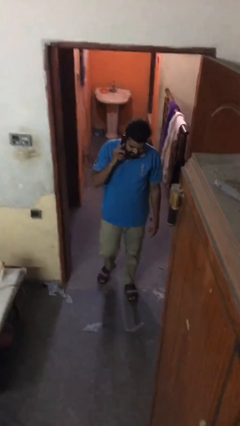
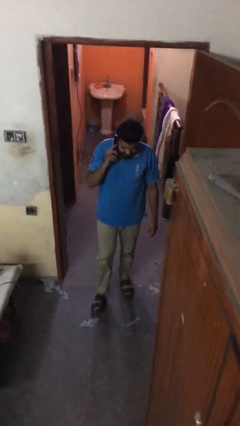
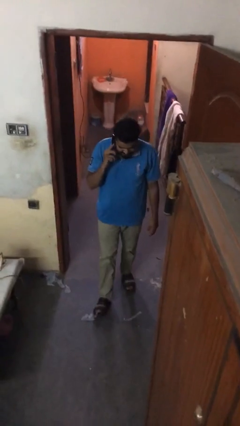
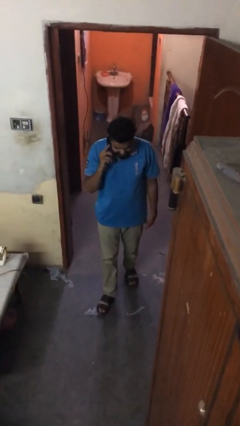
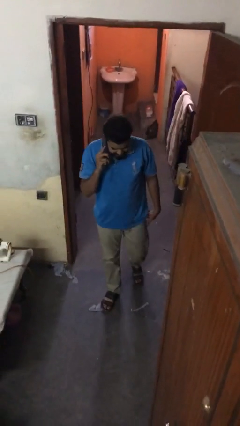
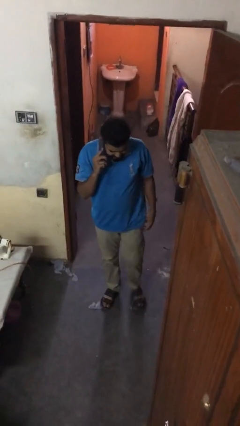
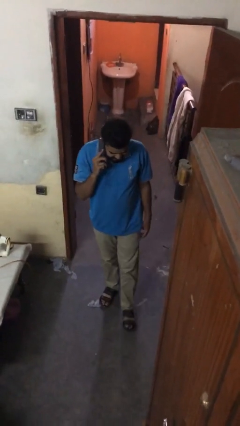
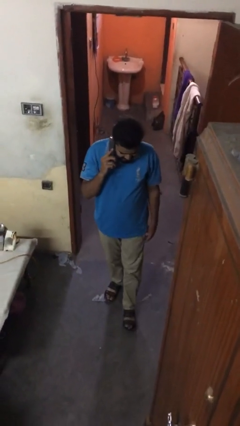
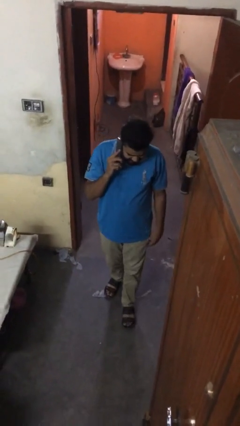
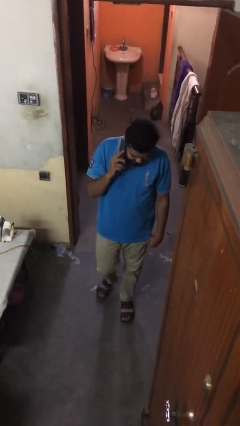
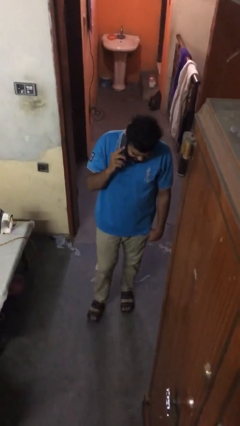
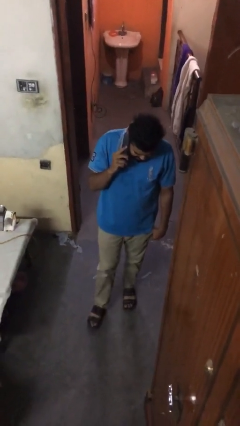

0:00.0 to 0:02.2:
person enters scene through structure

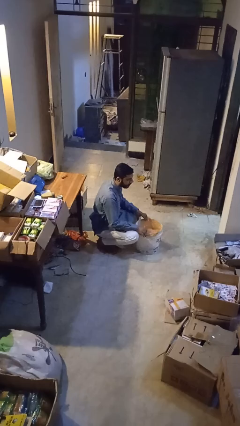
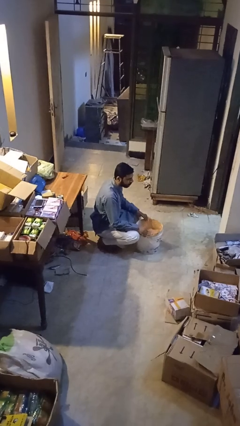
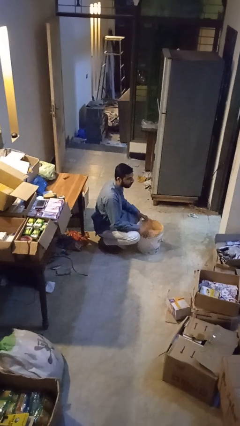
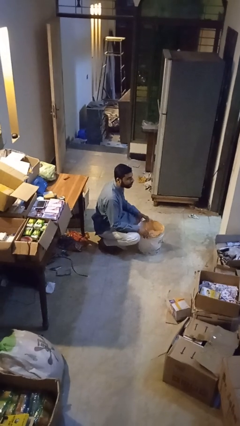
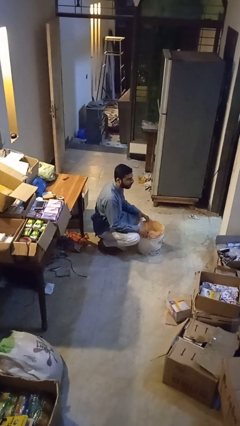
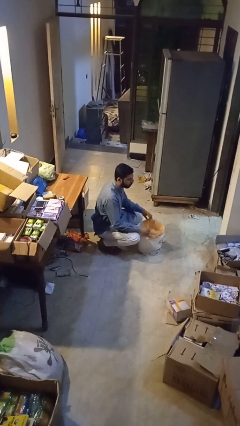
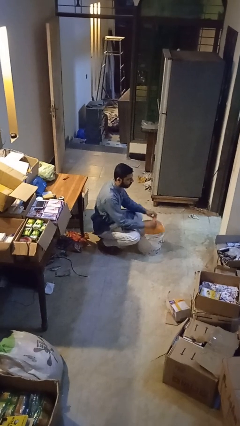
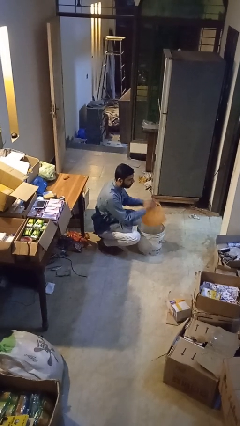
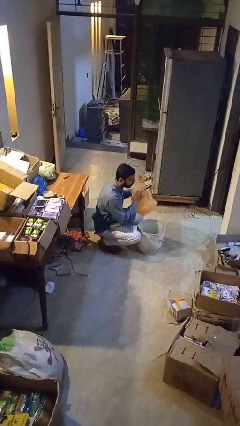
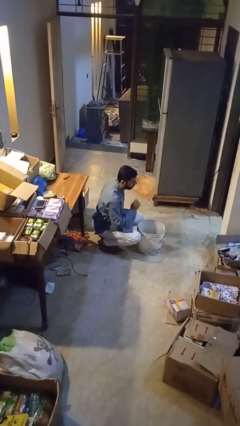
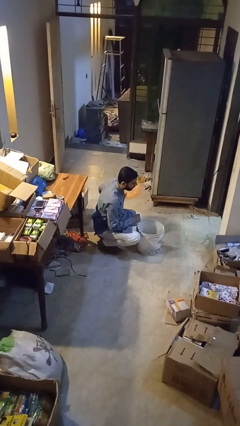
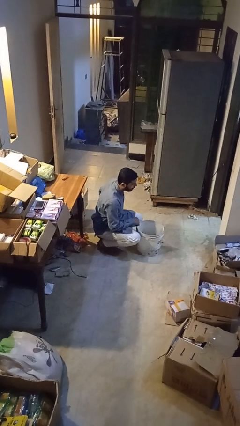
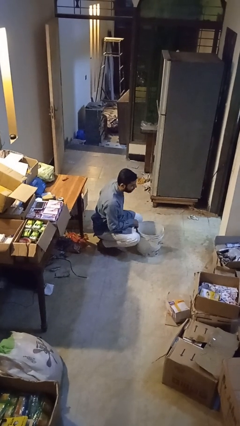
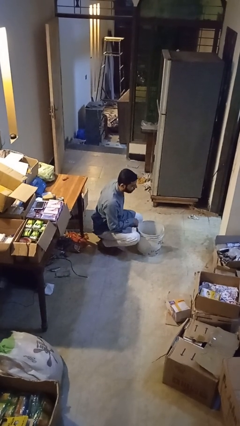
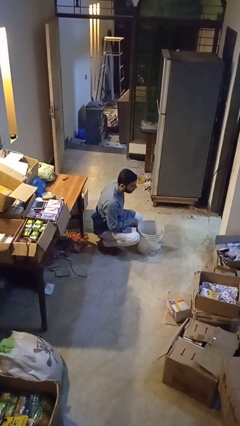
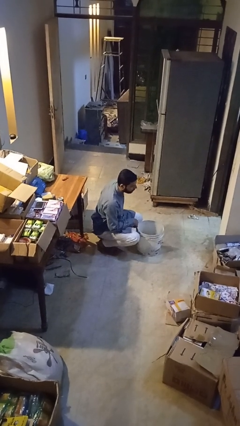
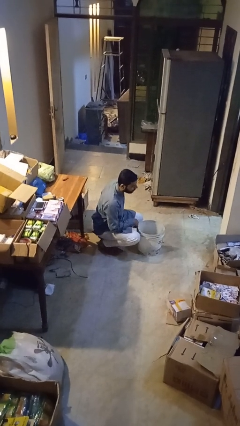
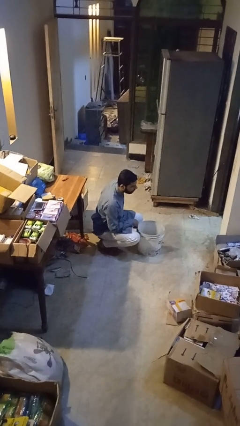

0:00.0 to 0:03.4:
person removes trashbag from trashcan

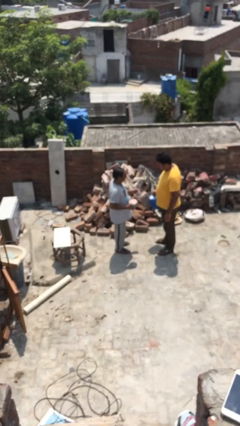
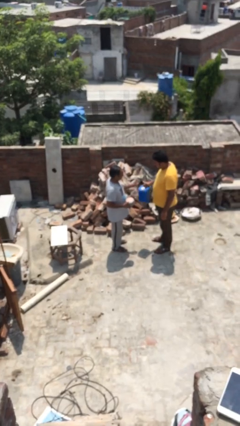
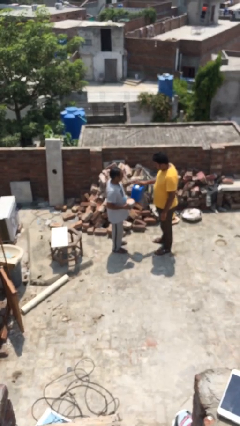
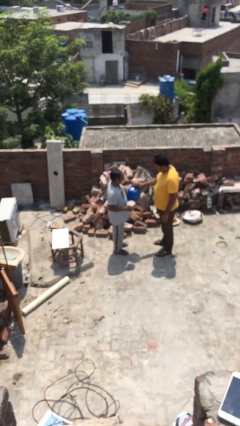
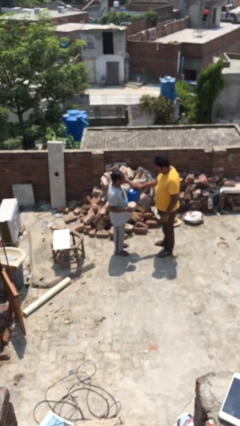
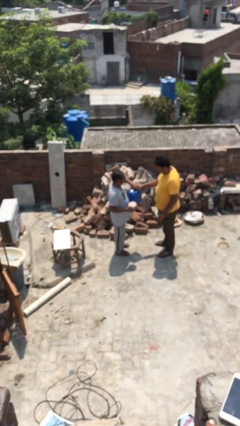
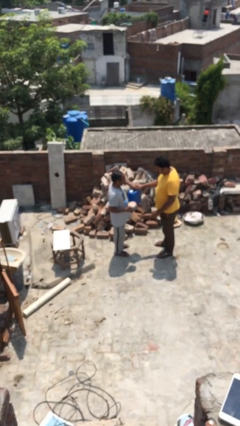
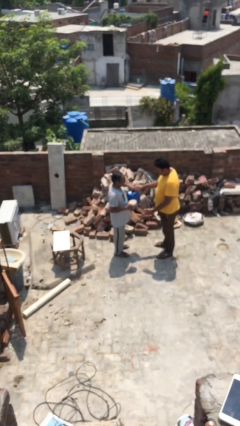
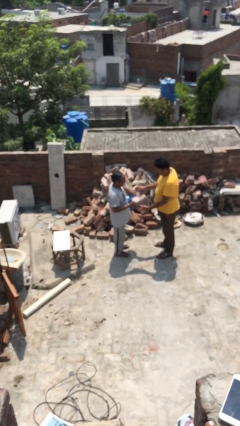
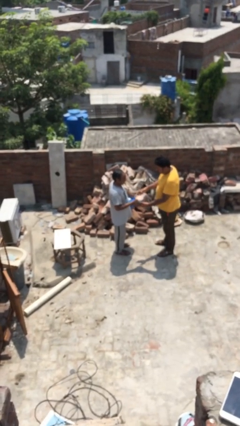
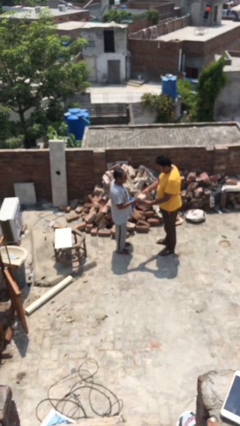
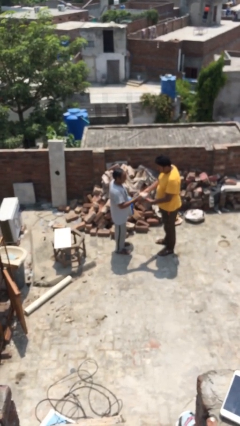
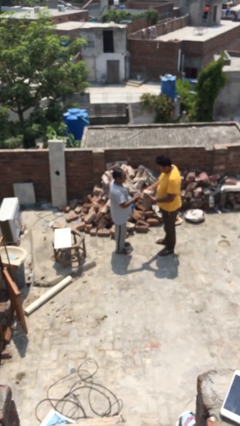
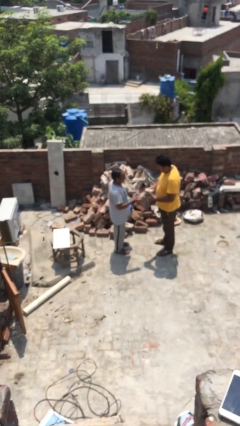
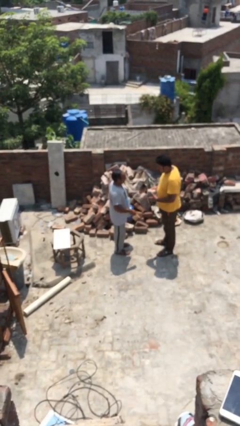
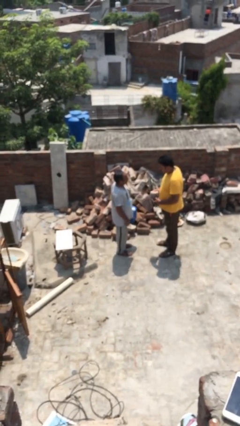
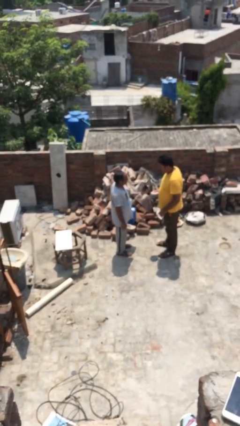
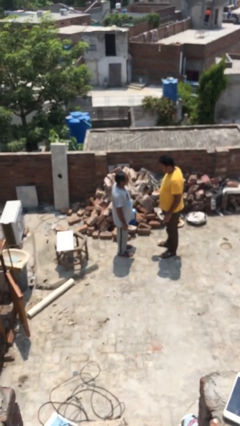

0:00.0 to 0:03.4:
person transfers object to person

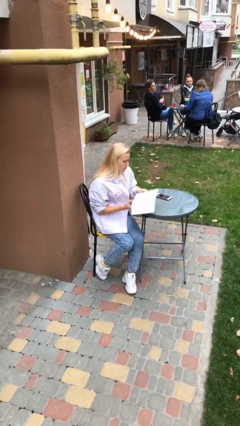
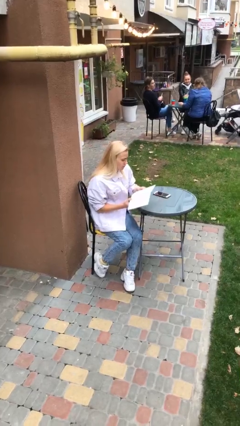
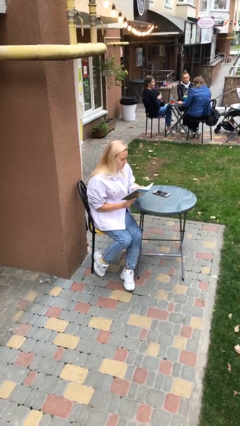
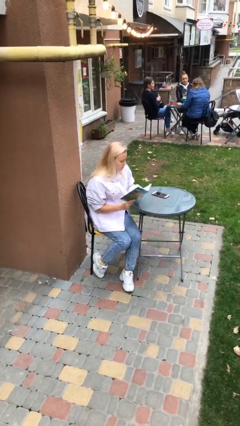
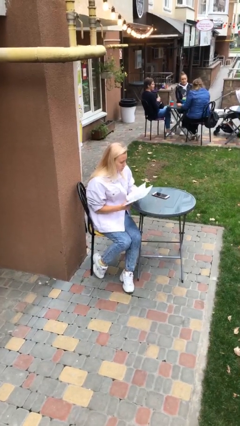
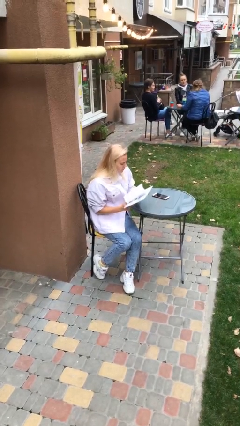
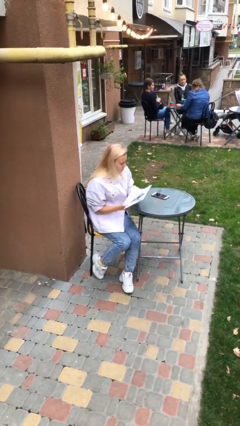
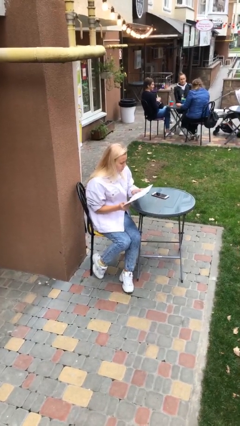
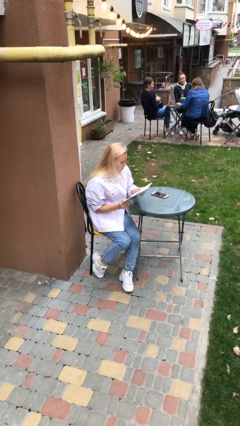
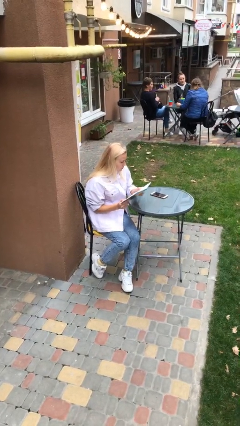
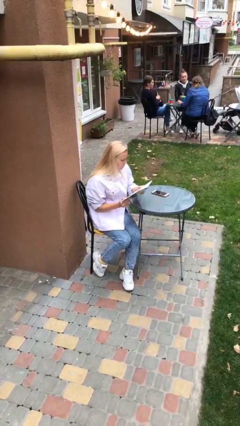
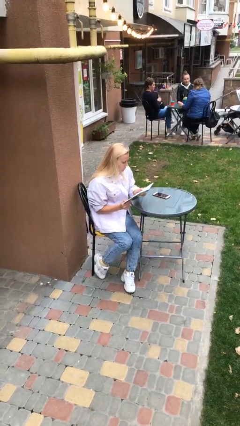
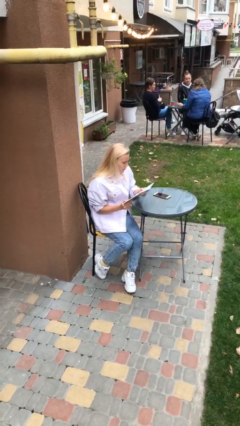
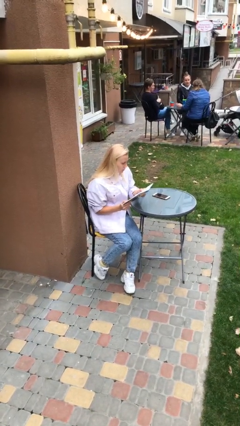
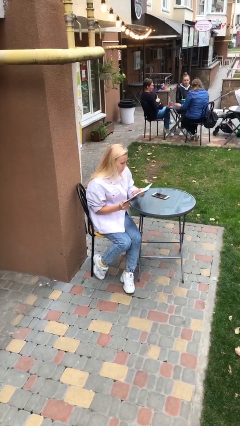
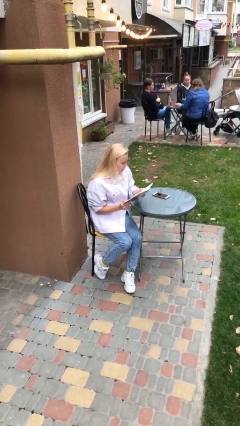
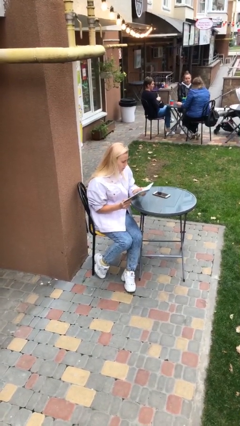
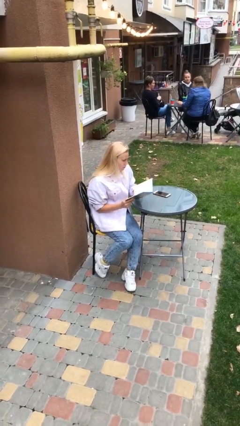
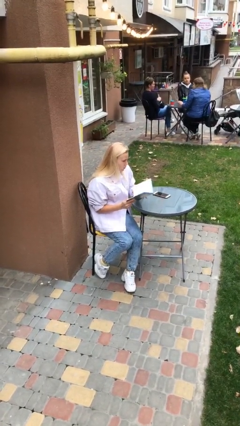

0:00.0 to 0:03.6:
person reads document

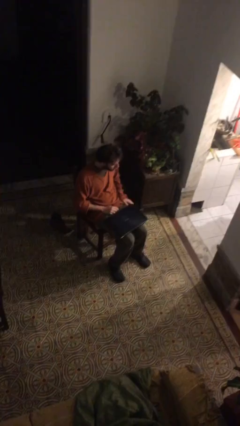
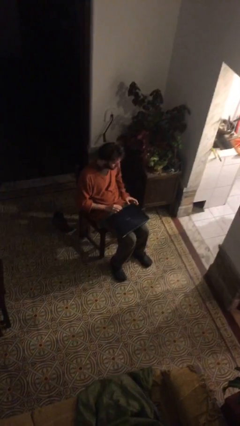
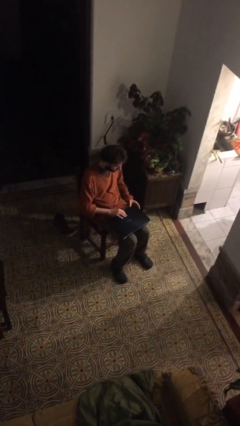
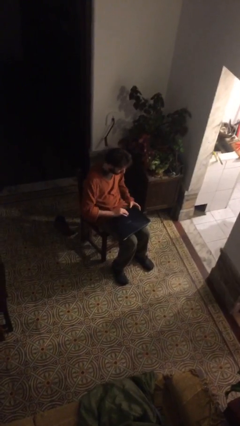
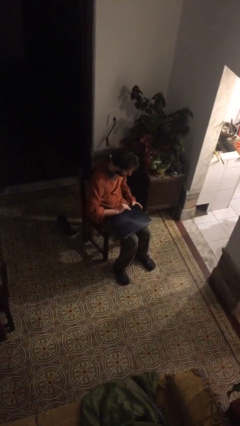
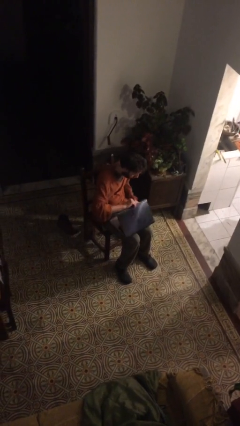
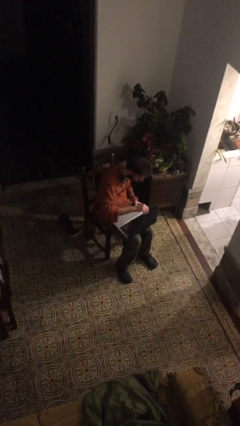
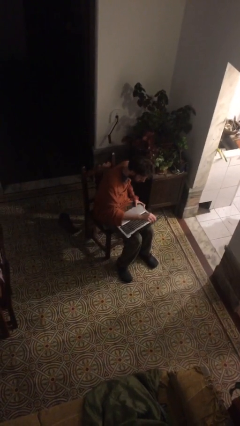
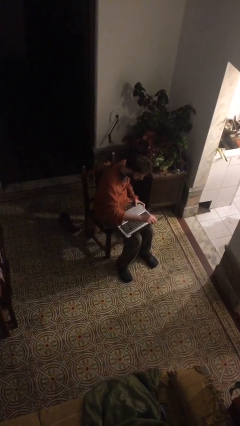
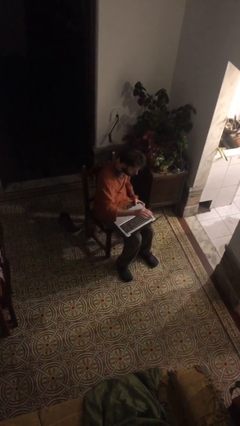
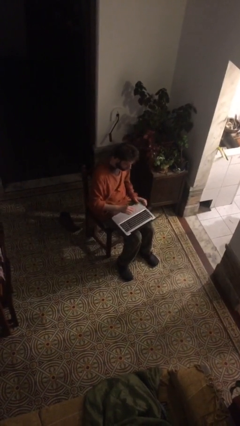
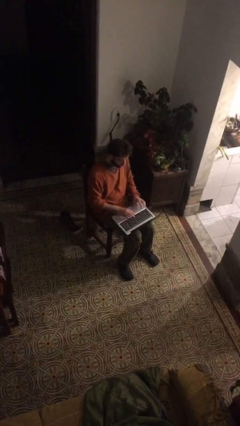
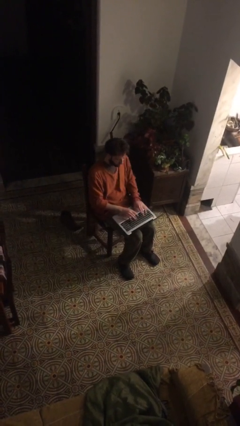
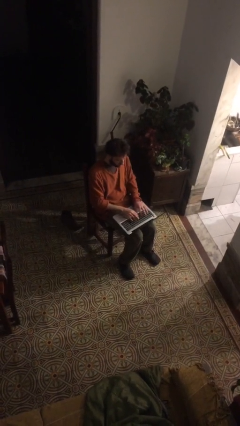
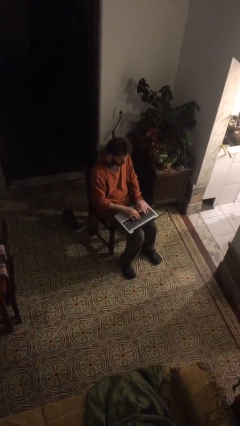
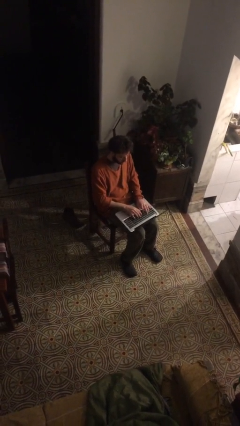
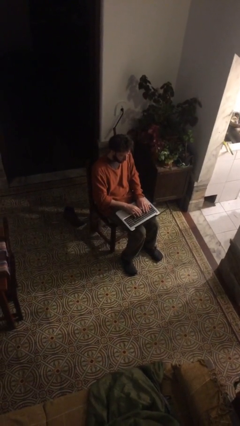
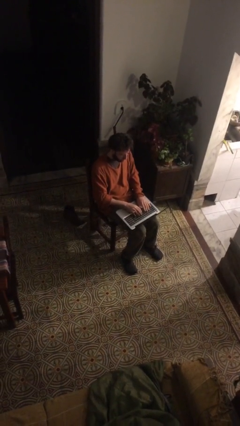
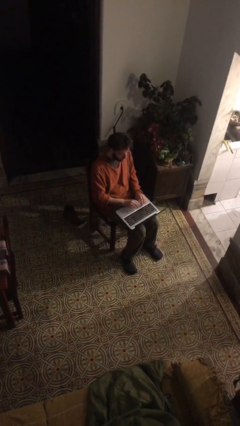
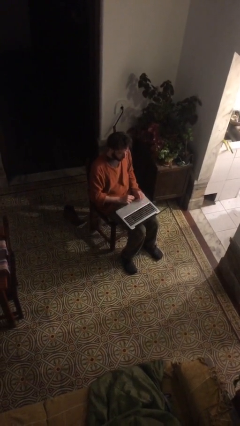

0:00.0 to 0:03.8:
person opens laptop

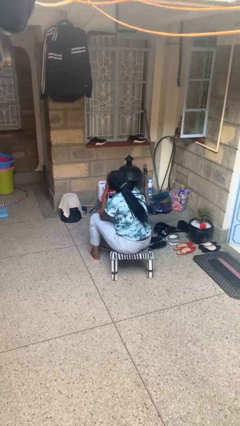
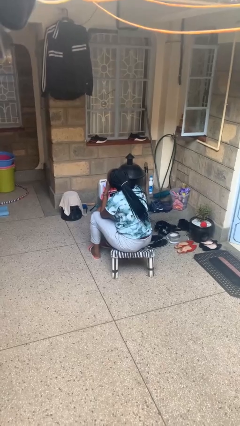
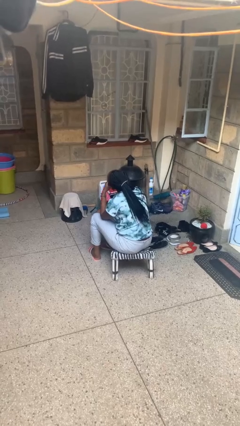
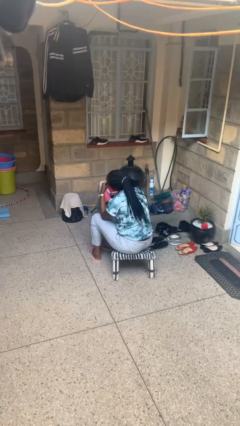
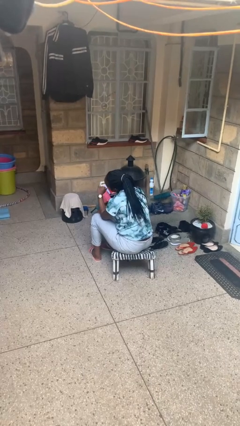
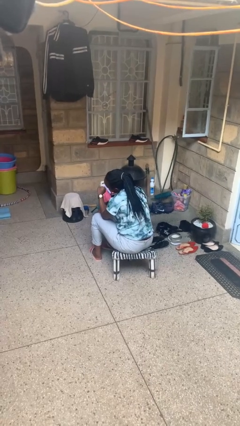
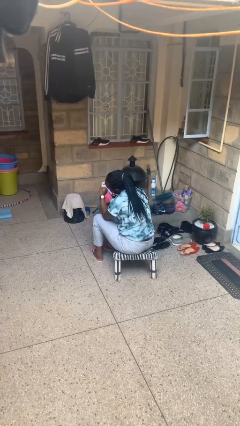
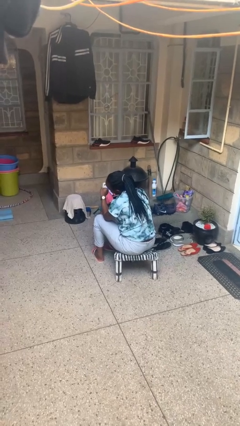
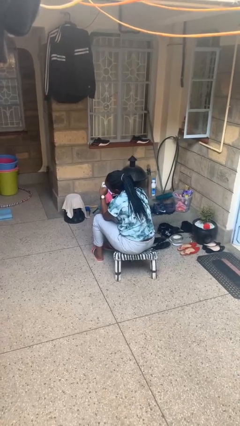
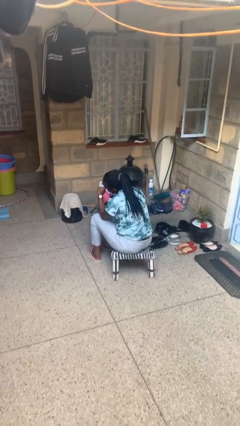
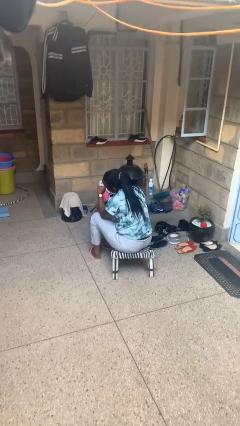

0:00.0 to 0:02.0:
person looks at wristwatch
